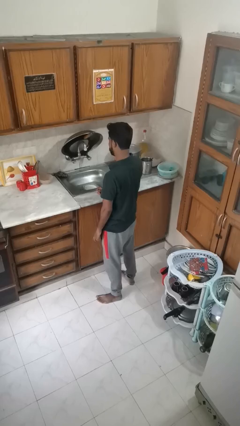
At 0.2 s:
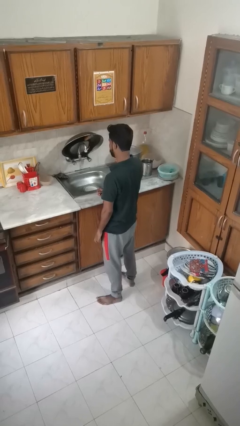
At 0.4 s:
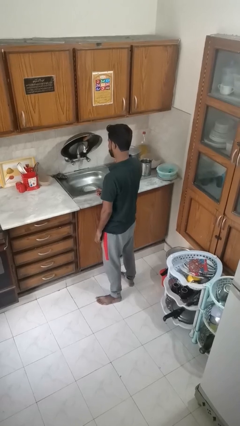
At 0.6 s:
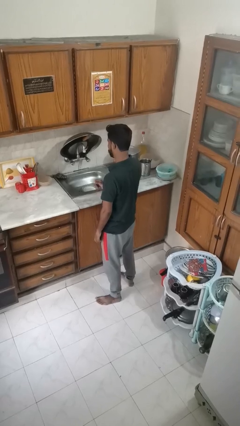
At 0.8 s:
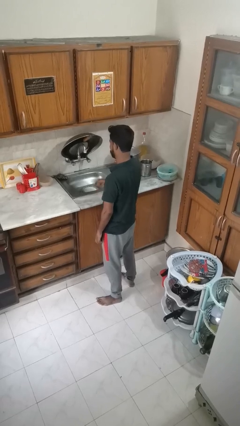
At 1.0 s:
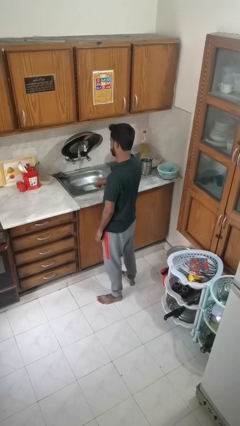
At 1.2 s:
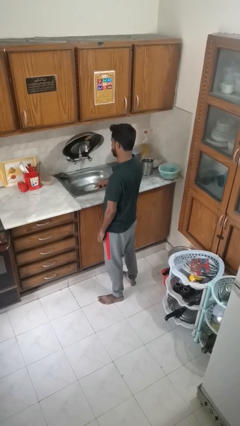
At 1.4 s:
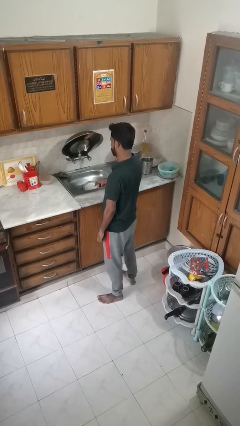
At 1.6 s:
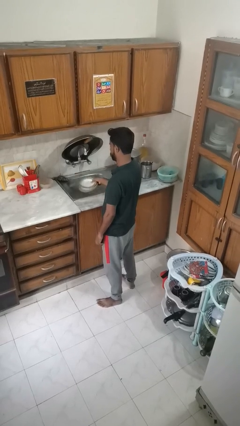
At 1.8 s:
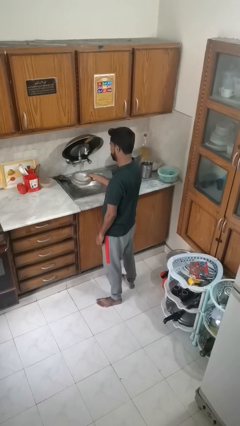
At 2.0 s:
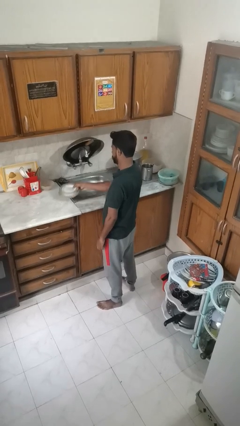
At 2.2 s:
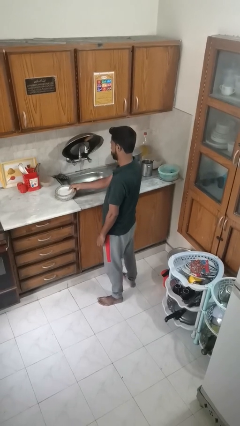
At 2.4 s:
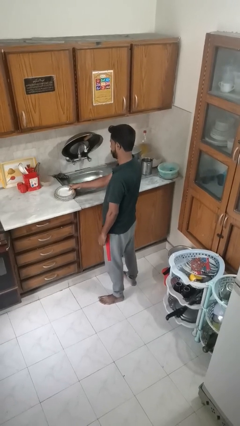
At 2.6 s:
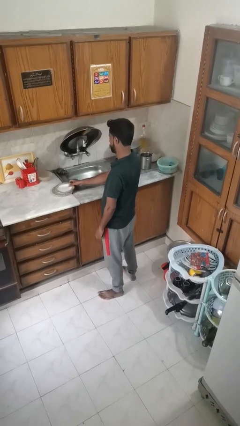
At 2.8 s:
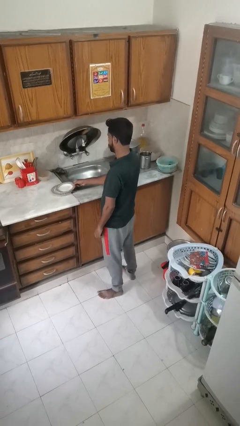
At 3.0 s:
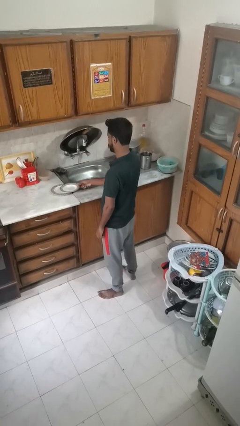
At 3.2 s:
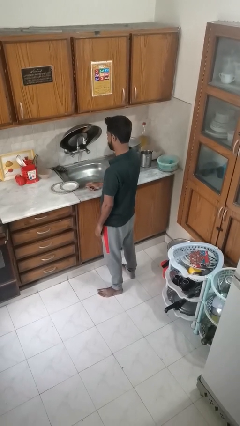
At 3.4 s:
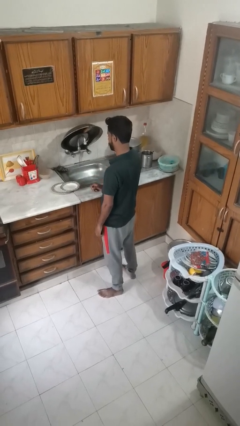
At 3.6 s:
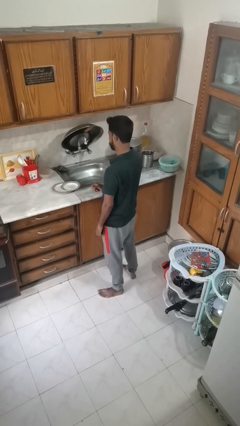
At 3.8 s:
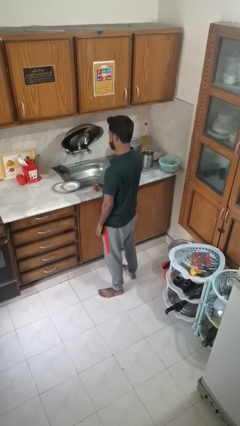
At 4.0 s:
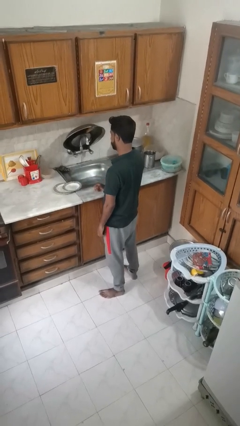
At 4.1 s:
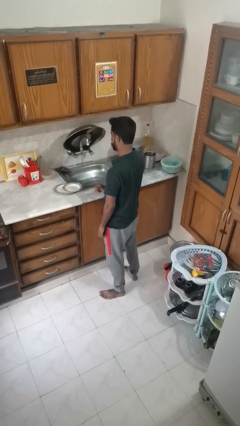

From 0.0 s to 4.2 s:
person closes dishwasher

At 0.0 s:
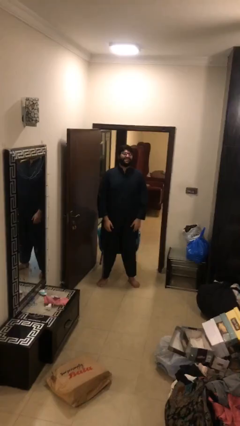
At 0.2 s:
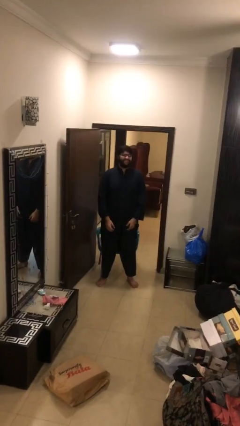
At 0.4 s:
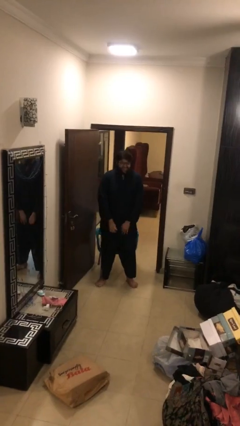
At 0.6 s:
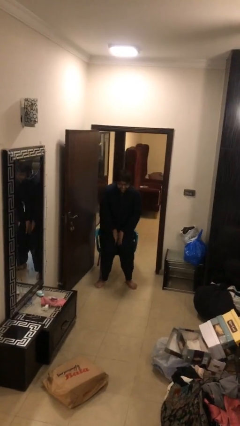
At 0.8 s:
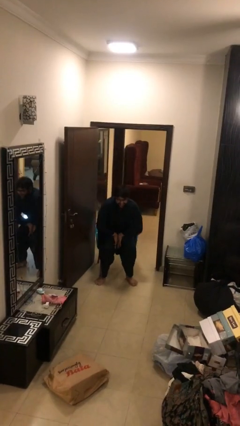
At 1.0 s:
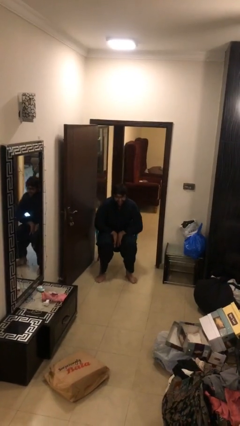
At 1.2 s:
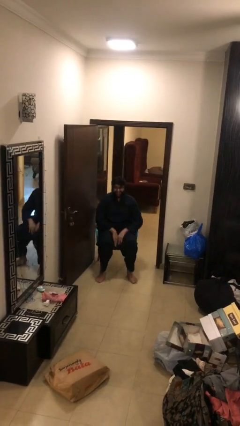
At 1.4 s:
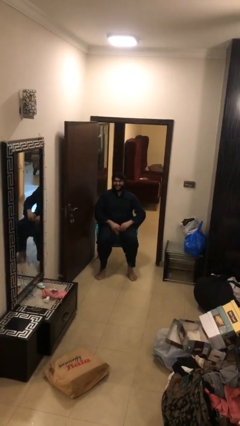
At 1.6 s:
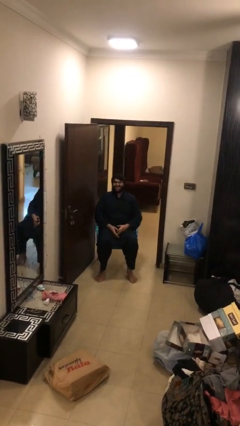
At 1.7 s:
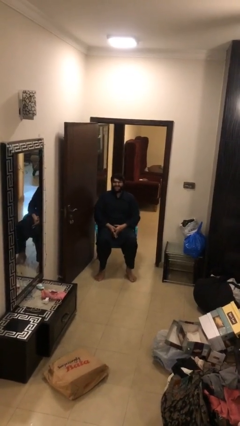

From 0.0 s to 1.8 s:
person sits down

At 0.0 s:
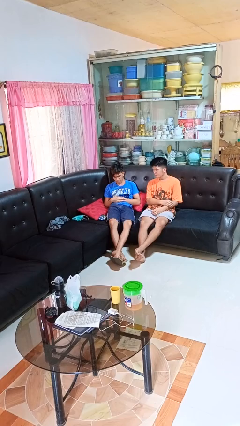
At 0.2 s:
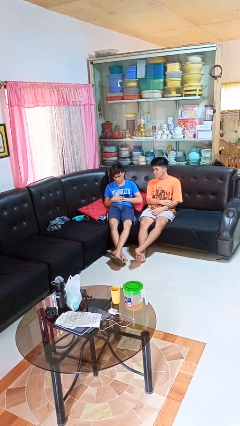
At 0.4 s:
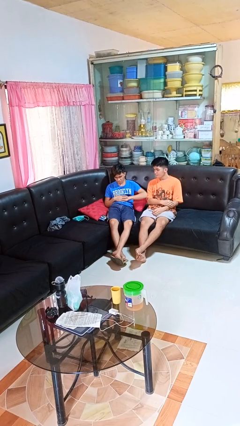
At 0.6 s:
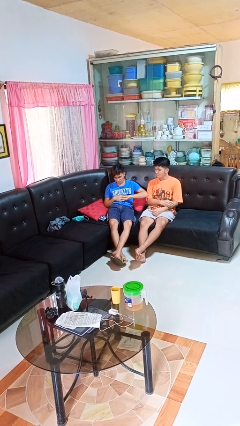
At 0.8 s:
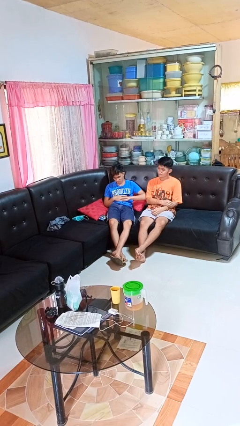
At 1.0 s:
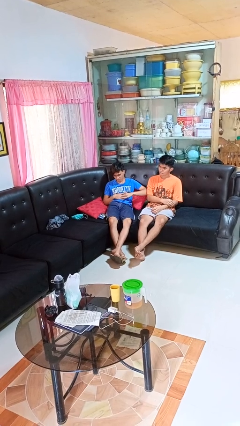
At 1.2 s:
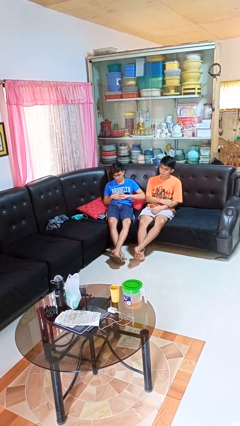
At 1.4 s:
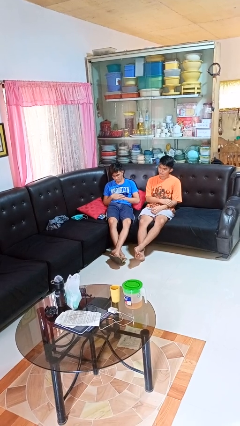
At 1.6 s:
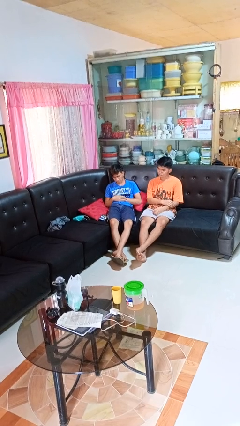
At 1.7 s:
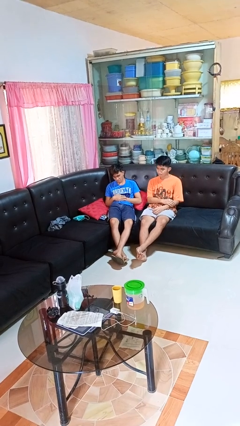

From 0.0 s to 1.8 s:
person nudges person with elbow

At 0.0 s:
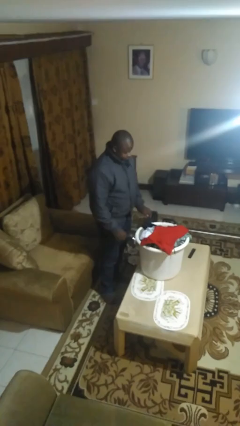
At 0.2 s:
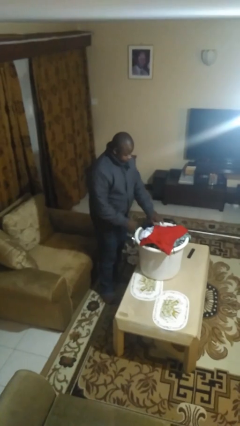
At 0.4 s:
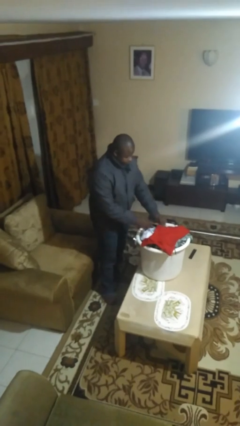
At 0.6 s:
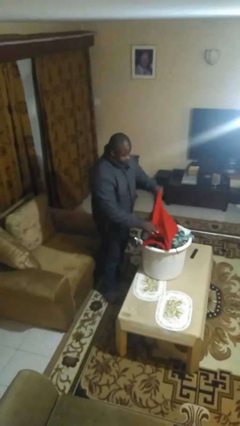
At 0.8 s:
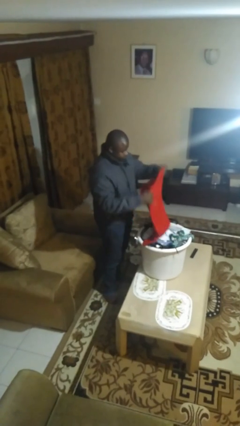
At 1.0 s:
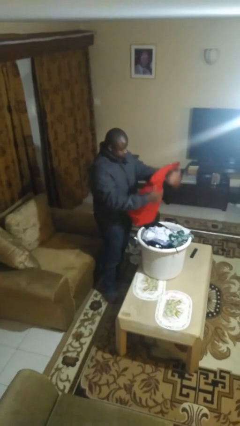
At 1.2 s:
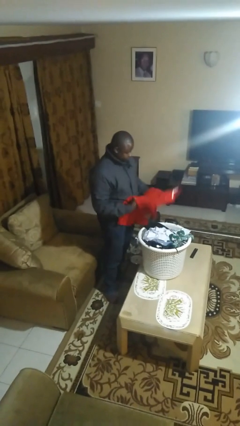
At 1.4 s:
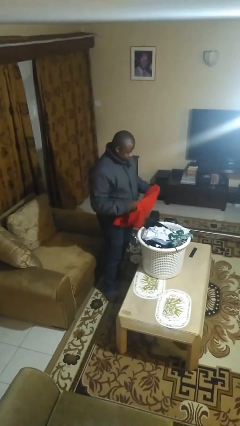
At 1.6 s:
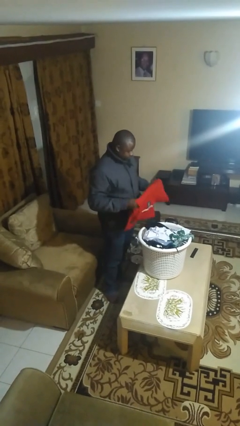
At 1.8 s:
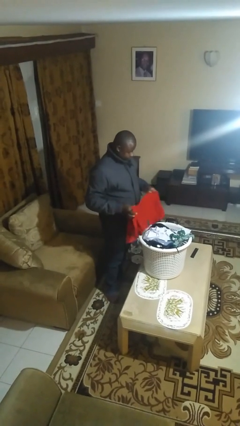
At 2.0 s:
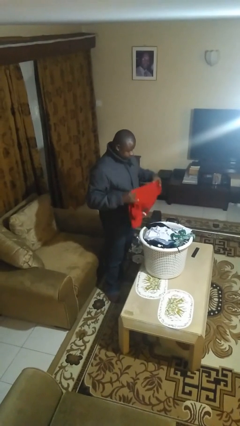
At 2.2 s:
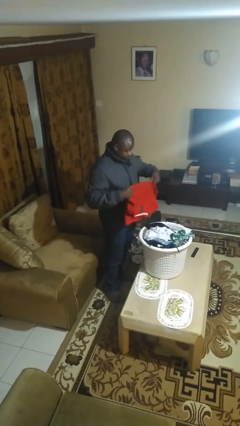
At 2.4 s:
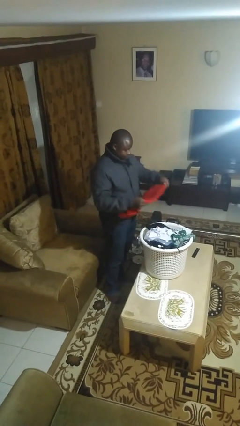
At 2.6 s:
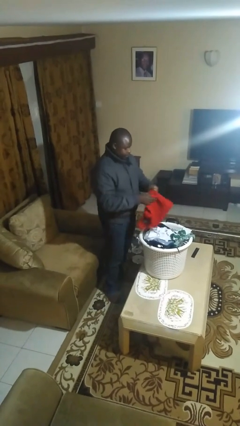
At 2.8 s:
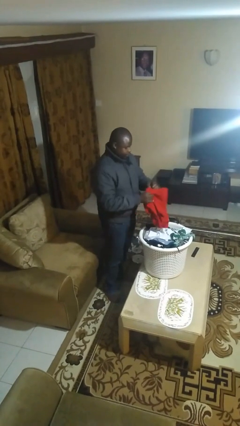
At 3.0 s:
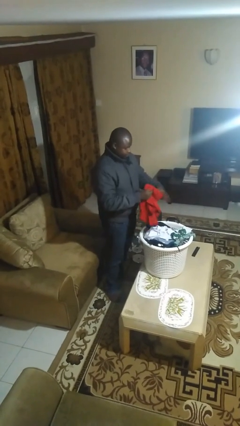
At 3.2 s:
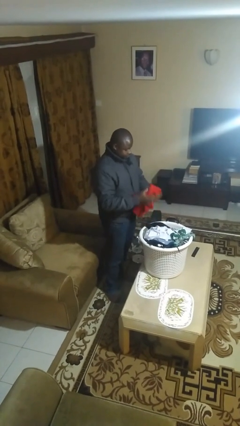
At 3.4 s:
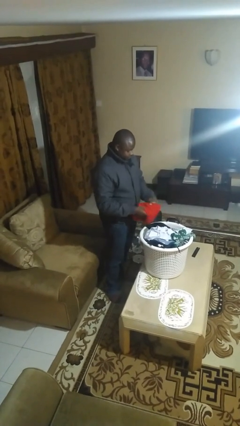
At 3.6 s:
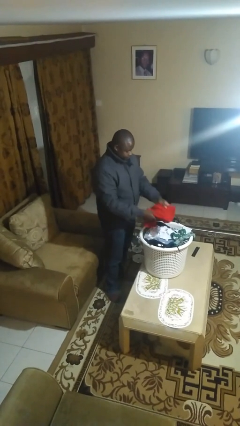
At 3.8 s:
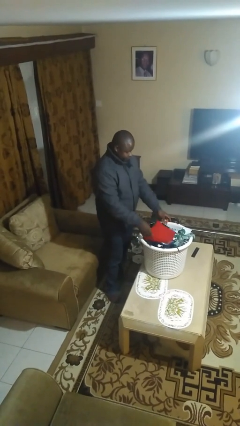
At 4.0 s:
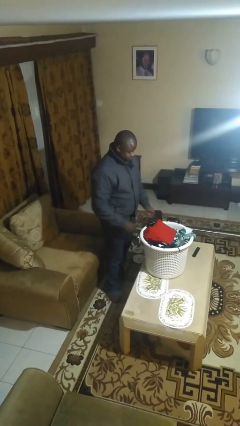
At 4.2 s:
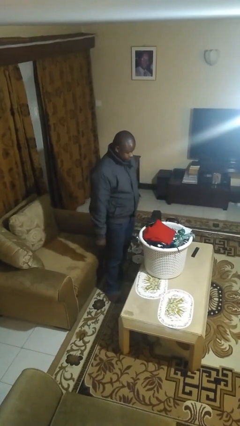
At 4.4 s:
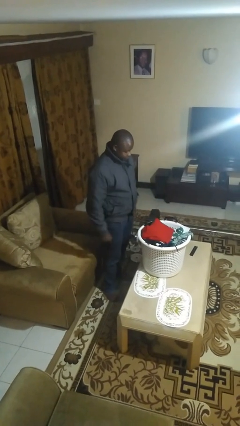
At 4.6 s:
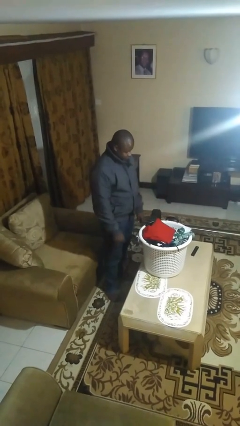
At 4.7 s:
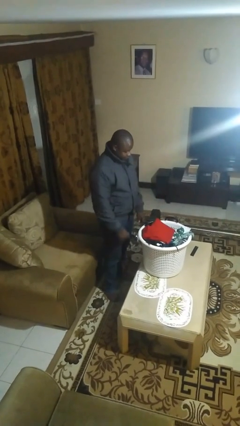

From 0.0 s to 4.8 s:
person folds shirt

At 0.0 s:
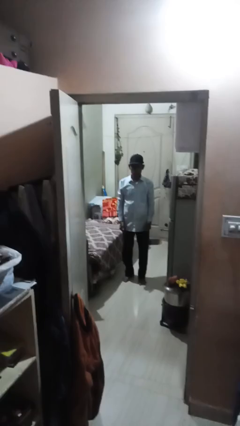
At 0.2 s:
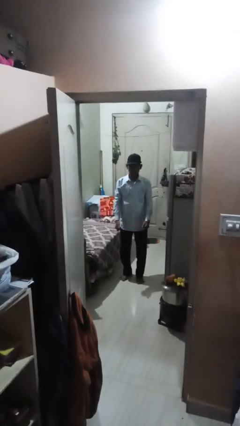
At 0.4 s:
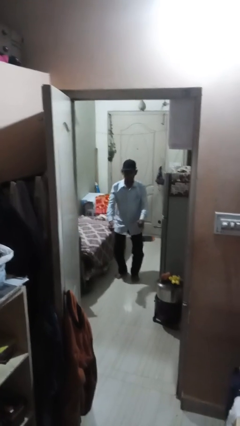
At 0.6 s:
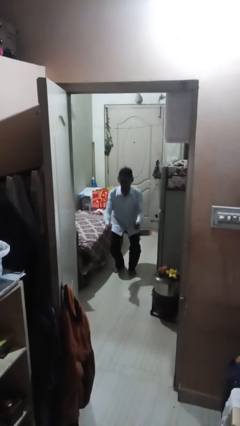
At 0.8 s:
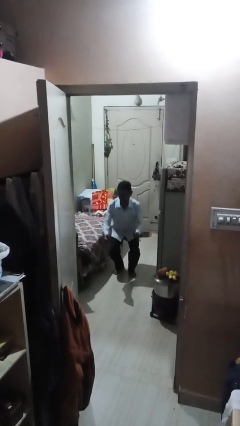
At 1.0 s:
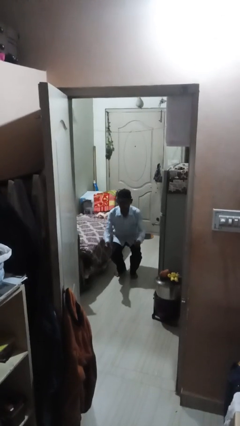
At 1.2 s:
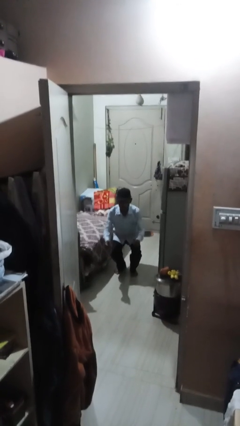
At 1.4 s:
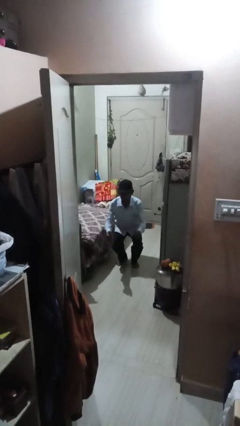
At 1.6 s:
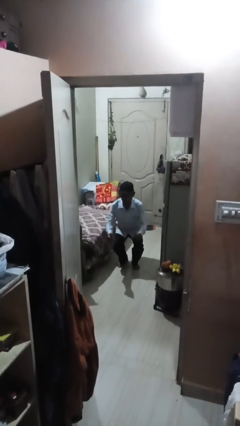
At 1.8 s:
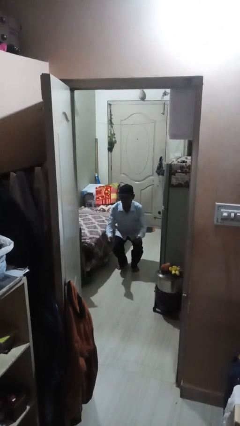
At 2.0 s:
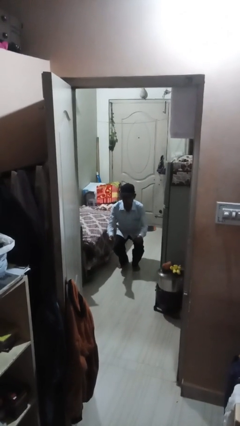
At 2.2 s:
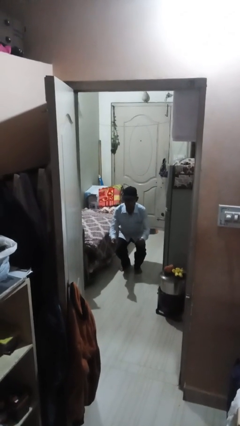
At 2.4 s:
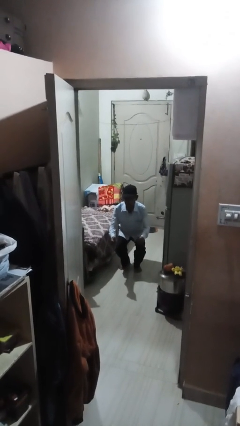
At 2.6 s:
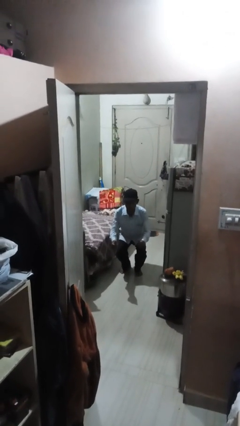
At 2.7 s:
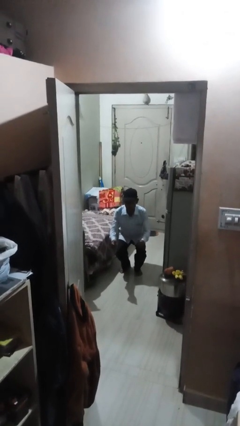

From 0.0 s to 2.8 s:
person squats

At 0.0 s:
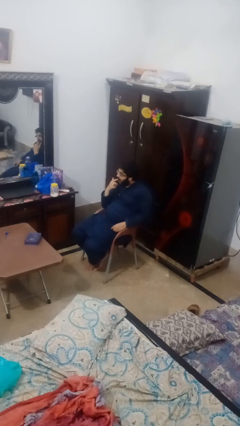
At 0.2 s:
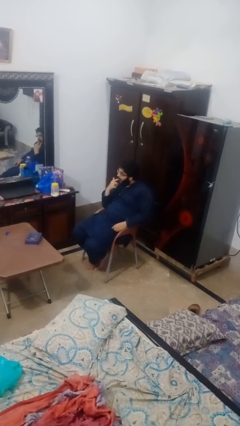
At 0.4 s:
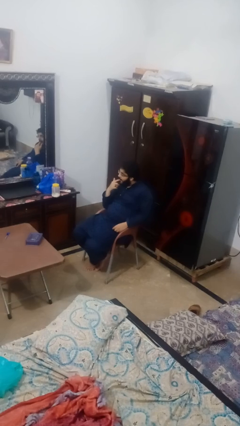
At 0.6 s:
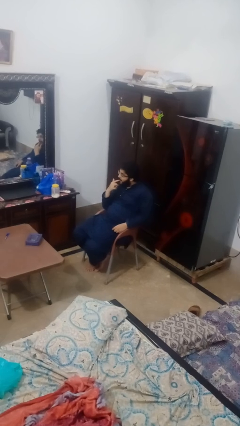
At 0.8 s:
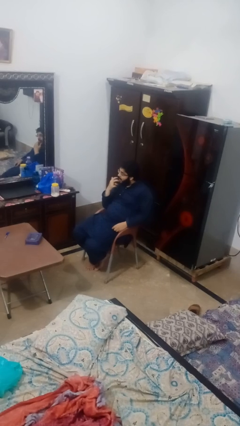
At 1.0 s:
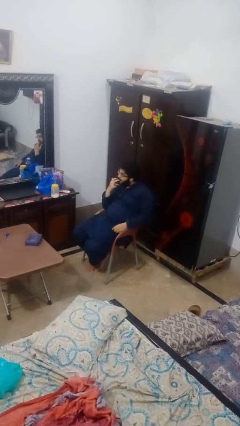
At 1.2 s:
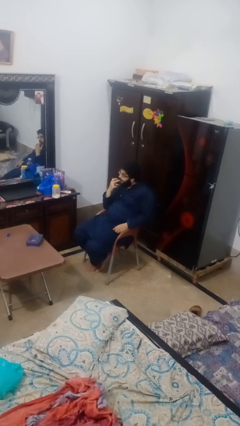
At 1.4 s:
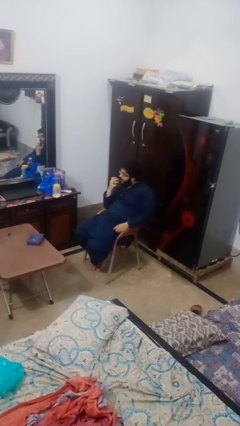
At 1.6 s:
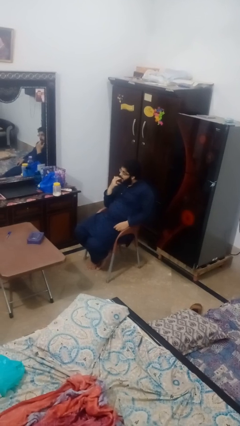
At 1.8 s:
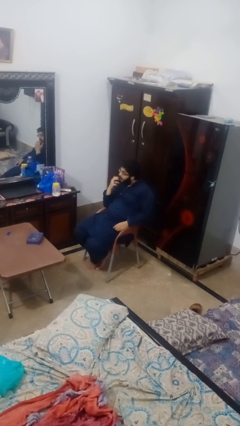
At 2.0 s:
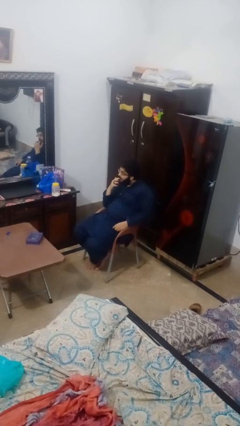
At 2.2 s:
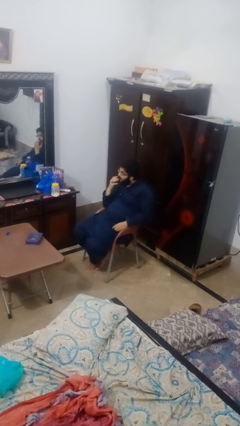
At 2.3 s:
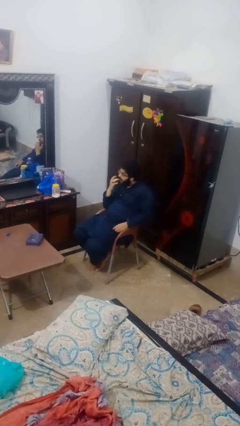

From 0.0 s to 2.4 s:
person licks fingers
